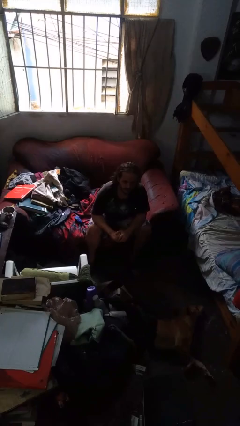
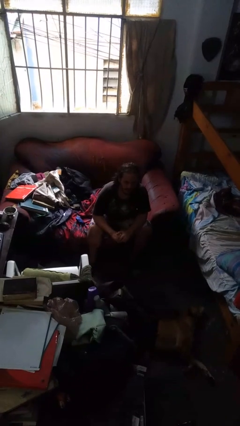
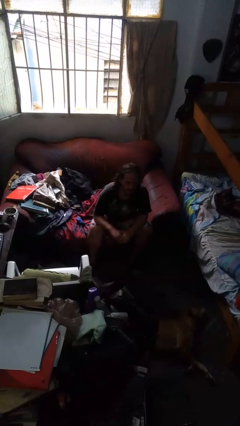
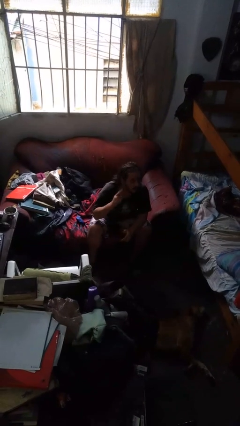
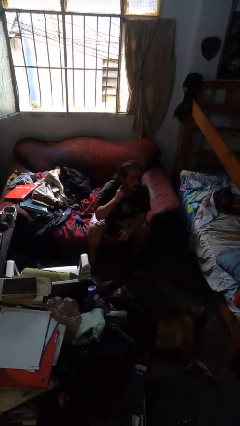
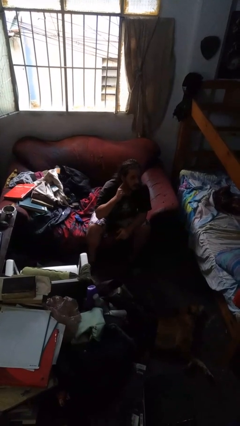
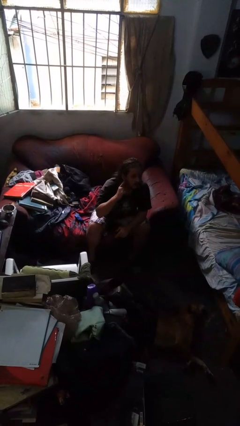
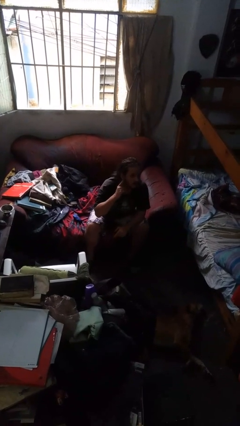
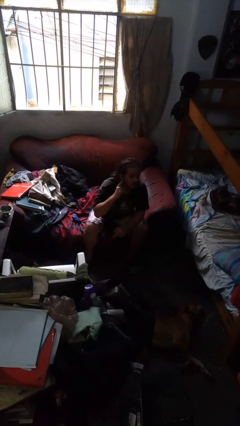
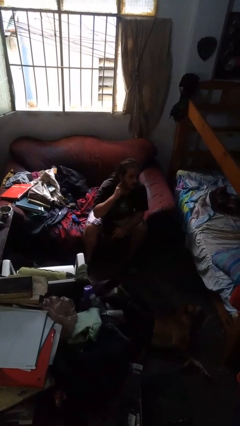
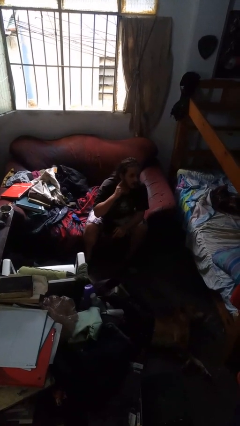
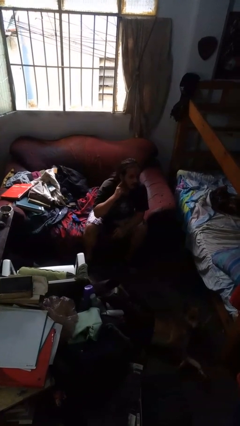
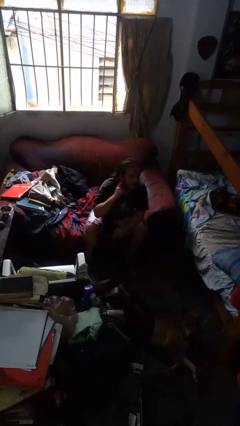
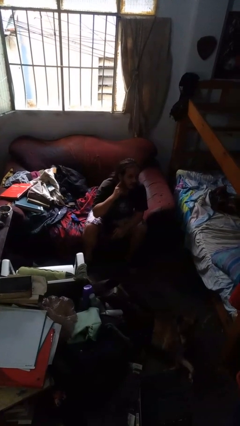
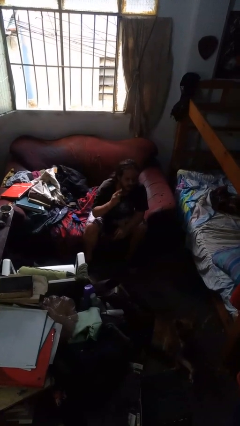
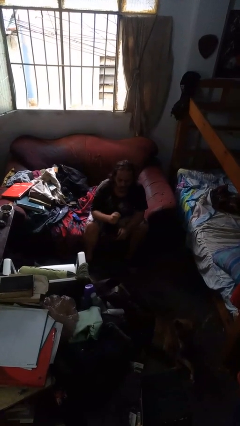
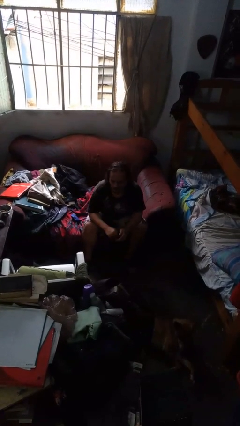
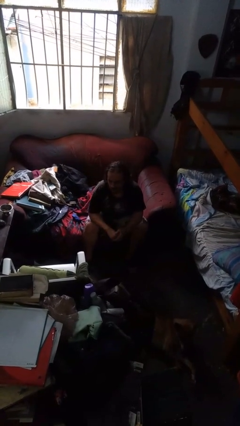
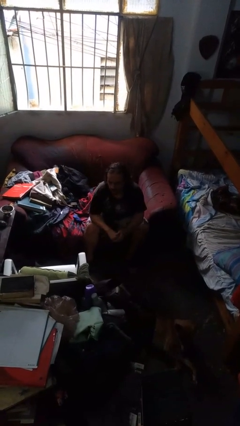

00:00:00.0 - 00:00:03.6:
person gestures listen closely

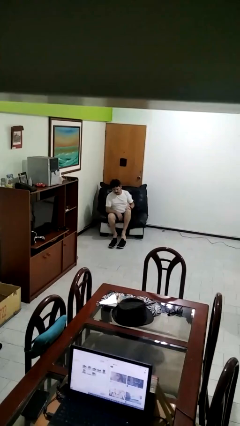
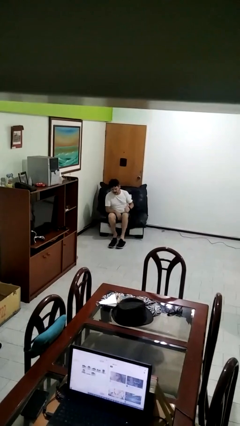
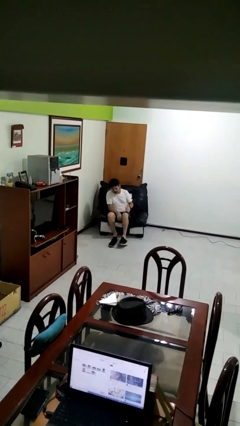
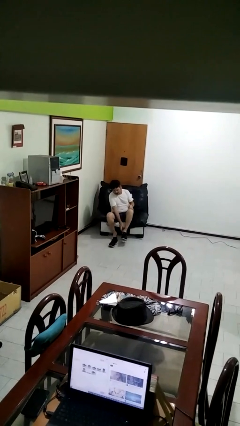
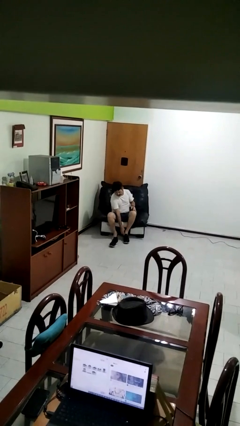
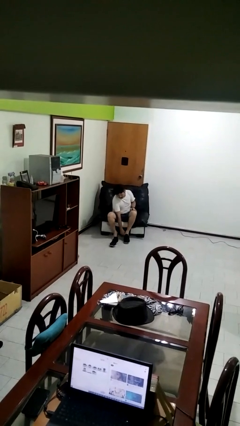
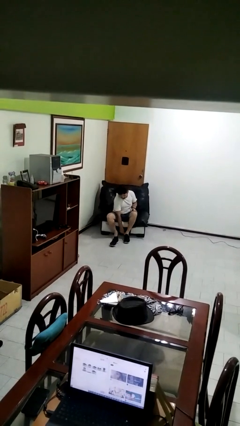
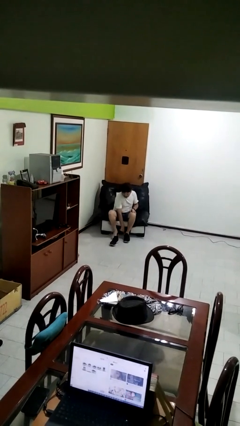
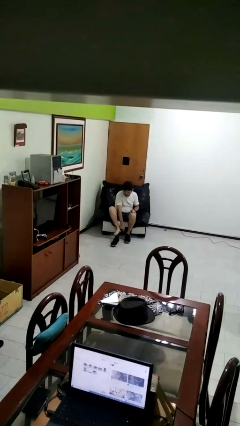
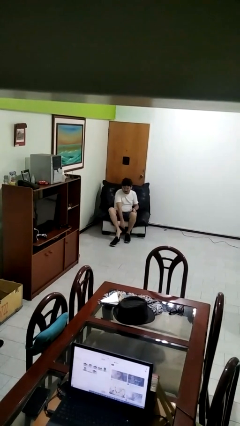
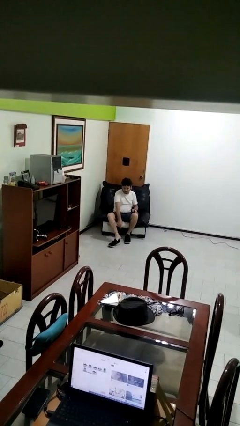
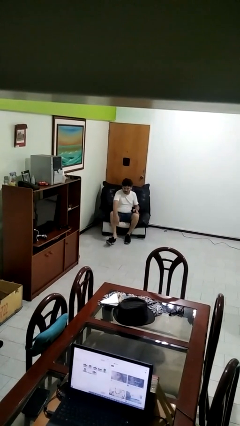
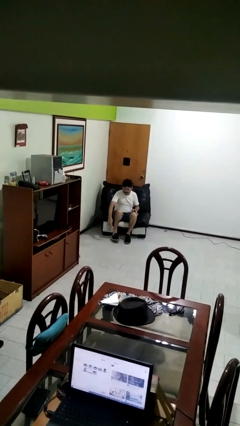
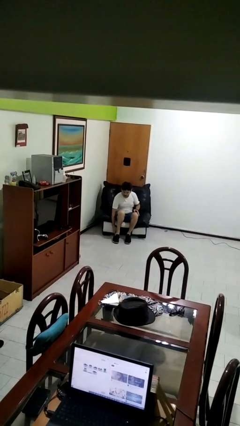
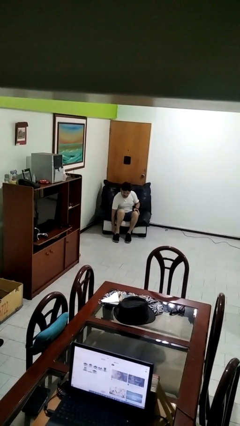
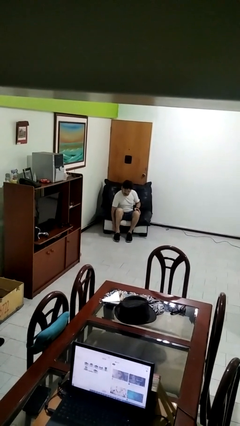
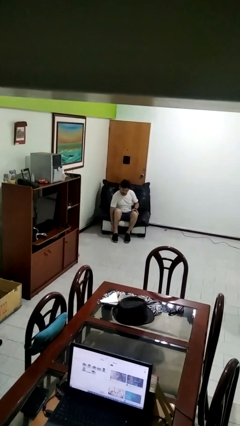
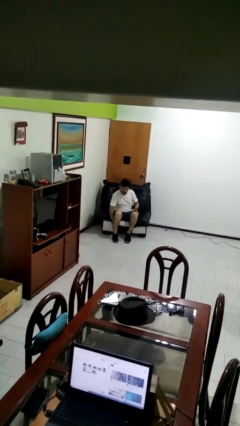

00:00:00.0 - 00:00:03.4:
person puts on shoes

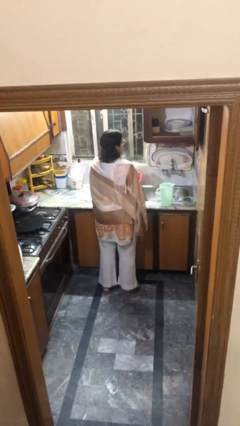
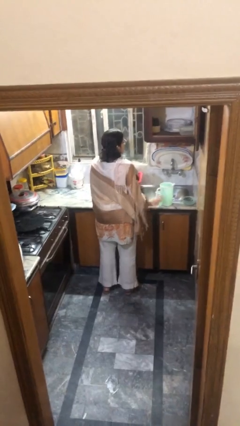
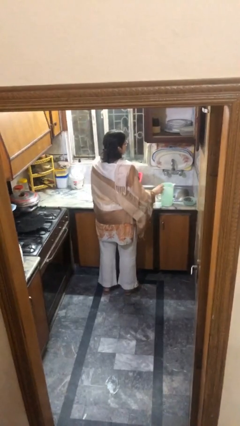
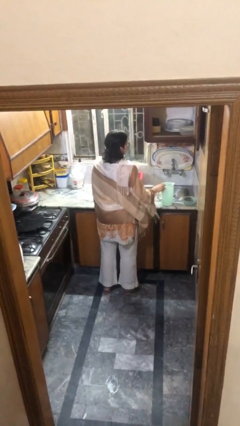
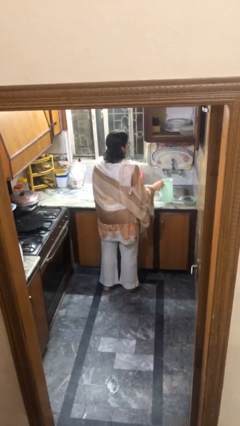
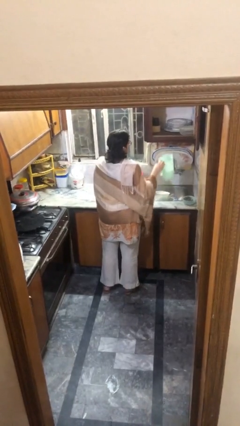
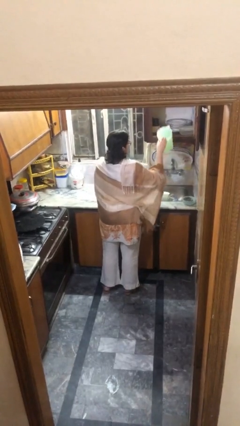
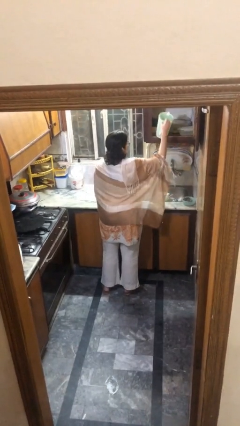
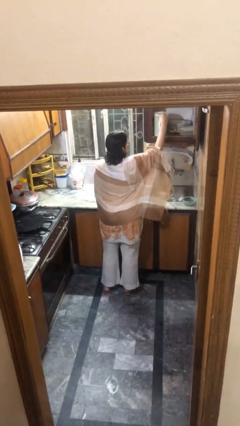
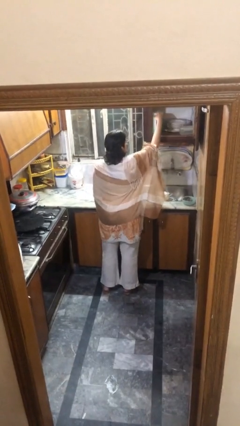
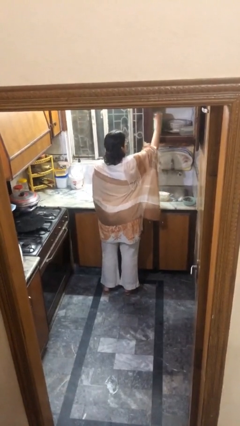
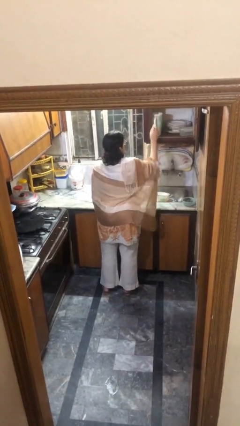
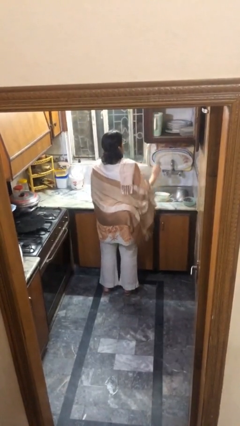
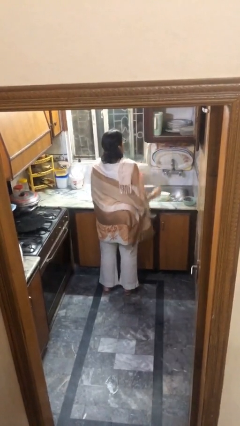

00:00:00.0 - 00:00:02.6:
person puts object into kitchen drawer

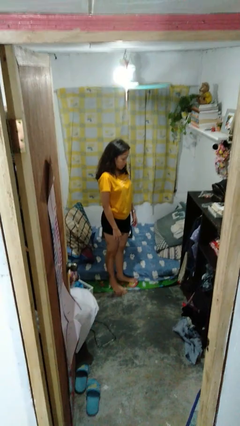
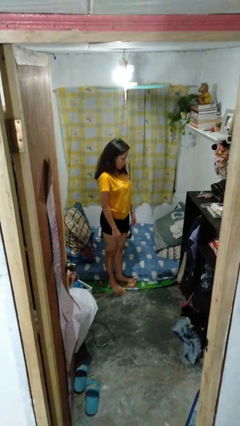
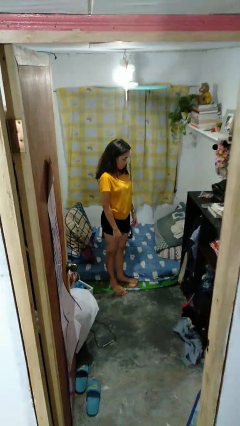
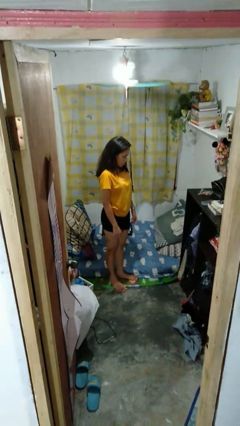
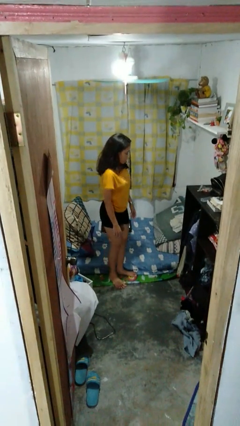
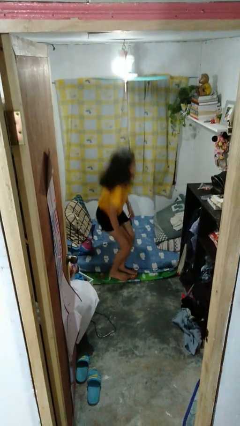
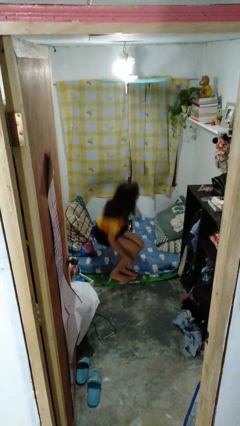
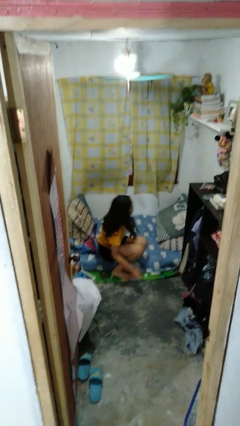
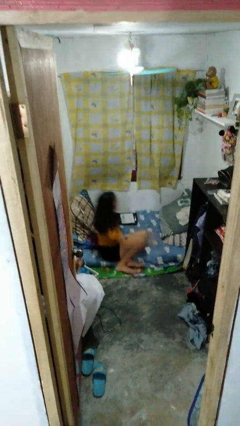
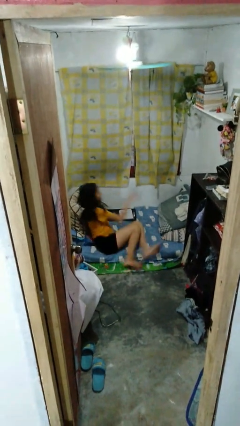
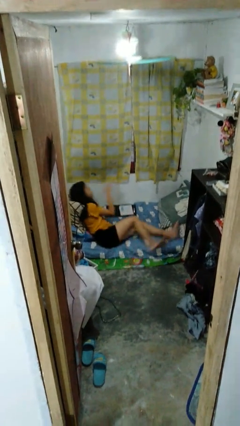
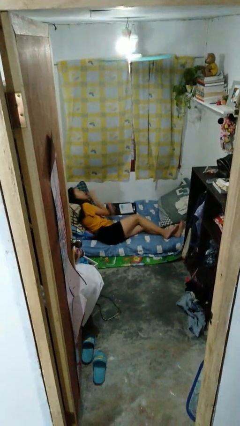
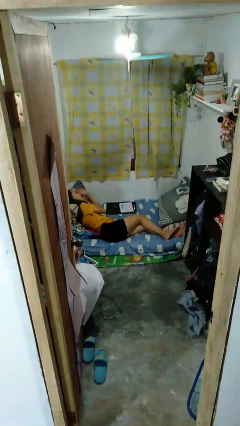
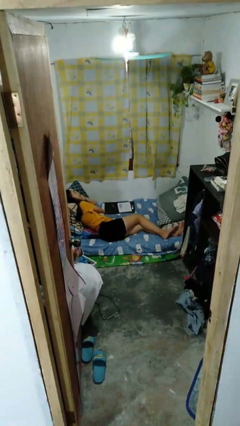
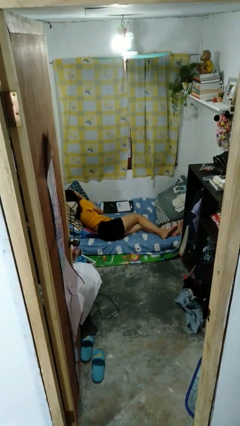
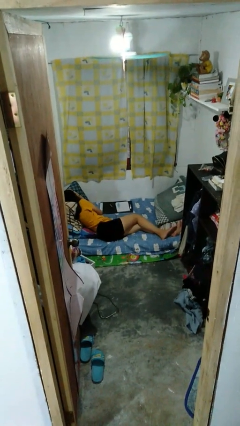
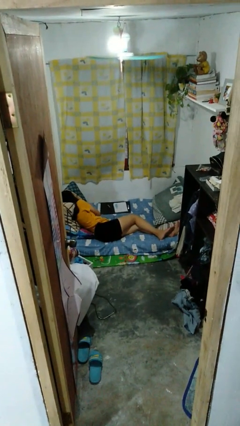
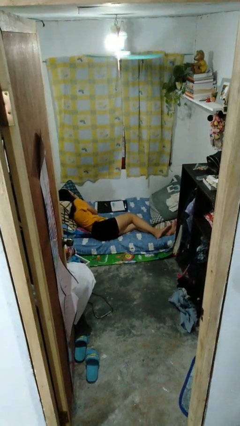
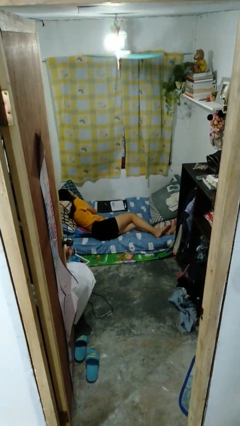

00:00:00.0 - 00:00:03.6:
person lies down on bed

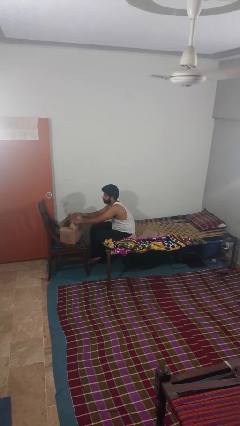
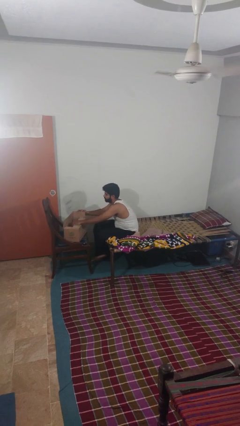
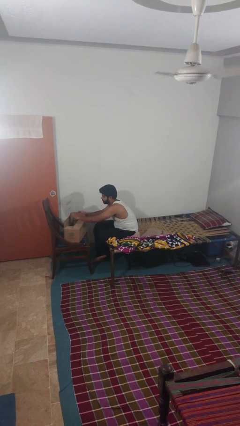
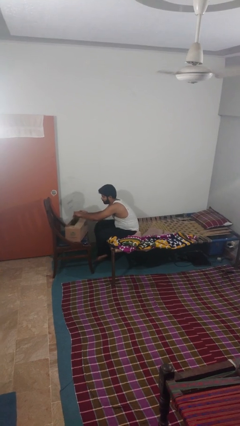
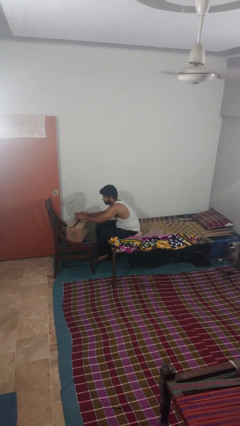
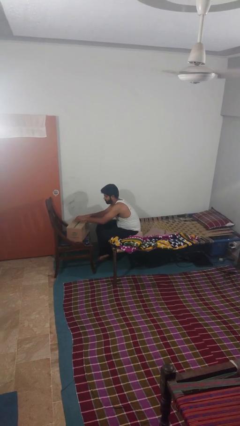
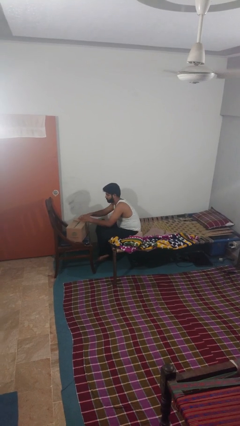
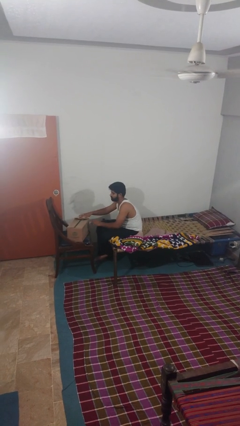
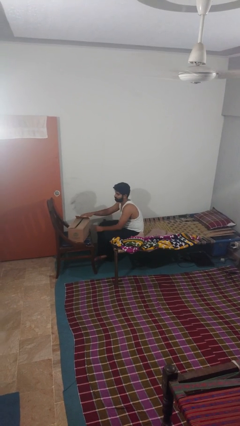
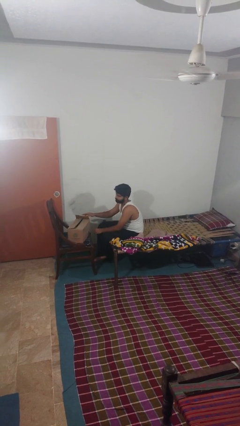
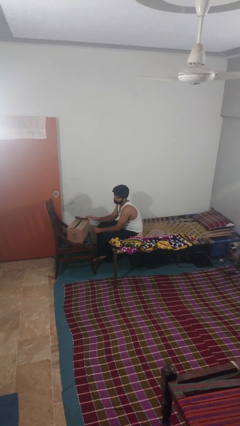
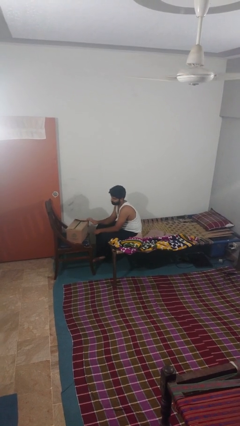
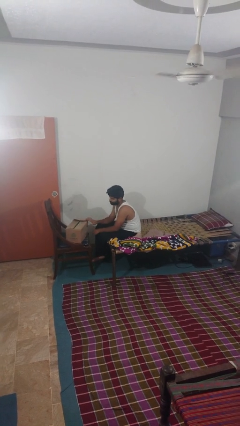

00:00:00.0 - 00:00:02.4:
person closes box

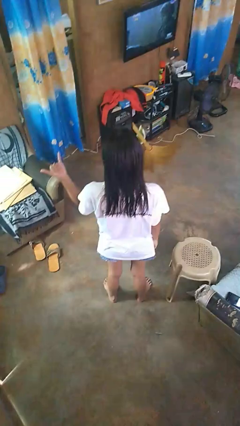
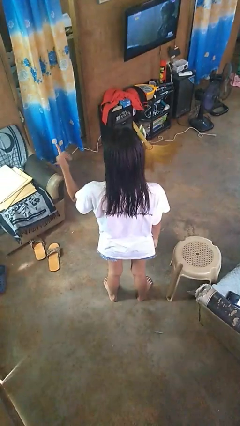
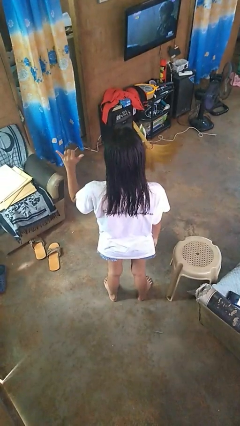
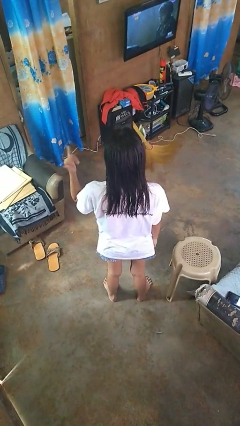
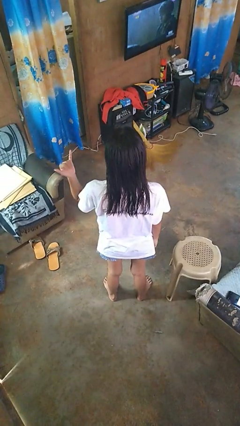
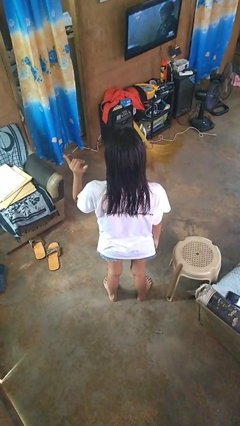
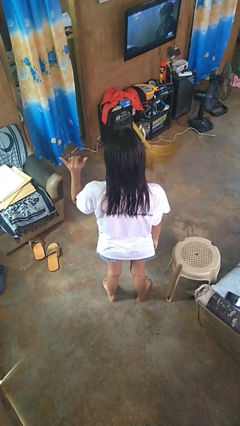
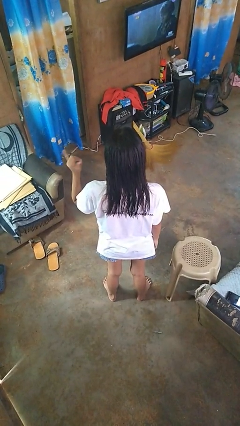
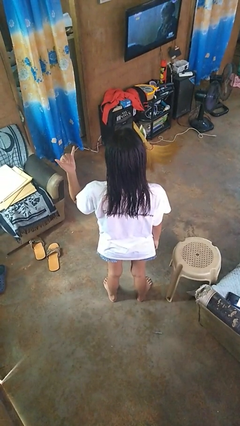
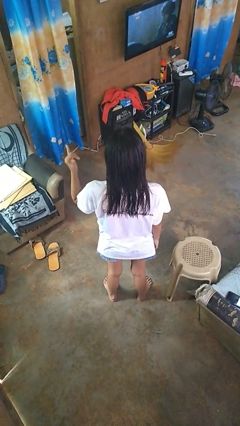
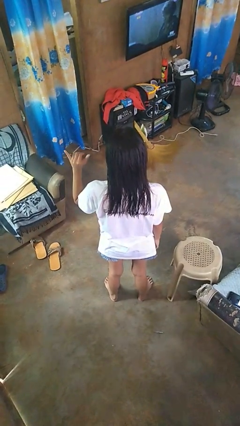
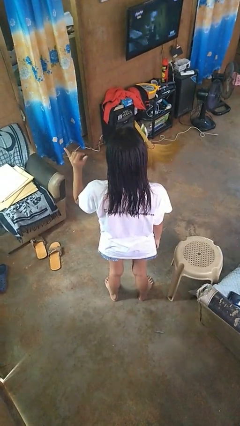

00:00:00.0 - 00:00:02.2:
person gestures hang loose
